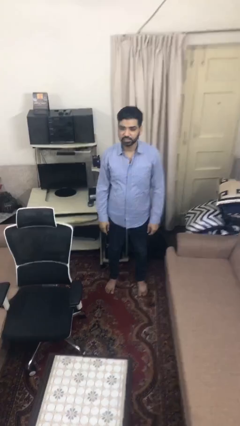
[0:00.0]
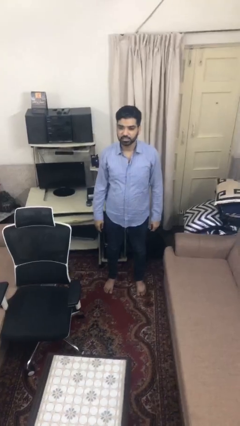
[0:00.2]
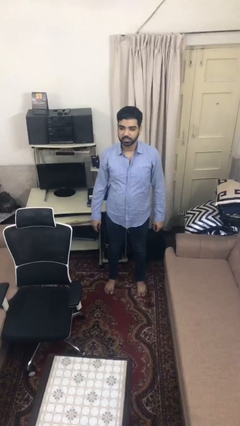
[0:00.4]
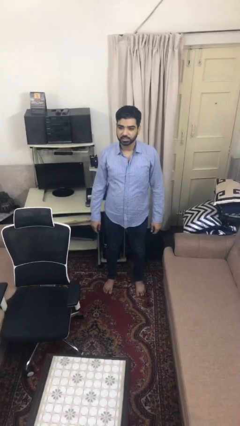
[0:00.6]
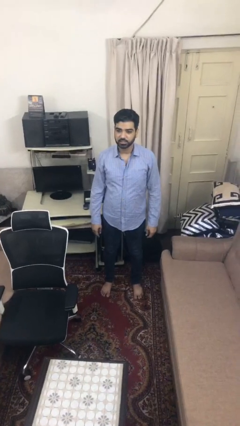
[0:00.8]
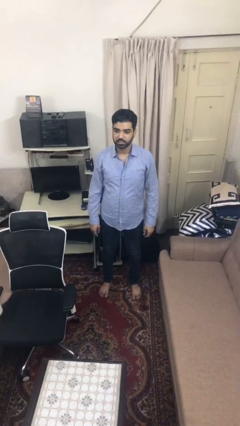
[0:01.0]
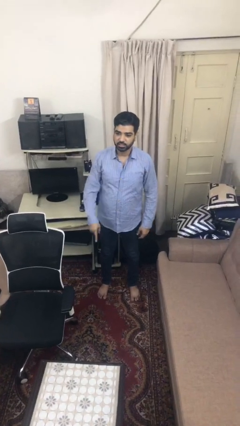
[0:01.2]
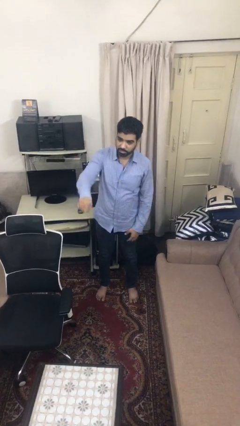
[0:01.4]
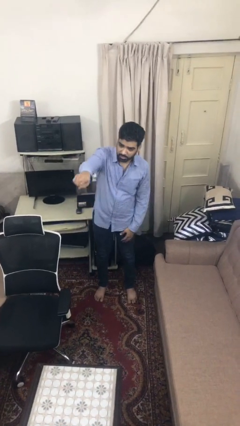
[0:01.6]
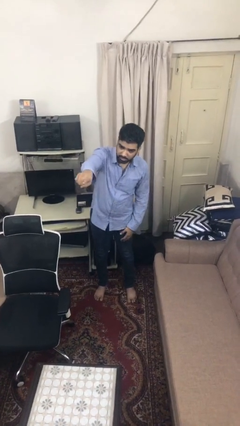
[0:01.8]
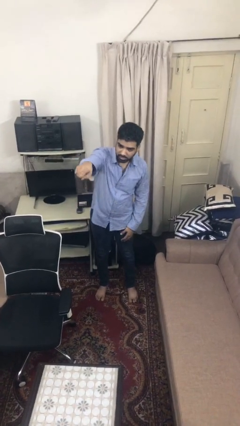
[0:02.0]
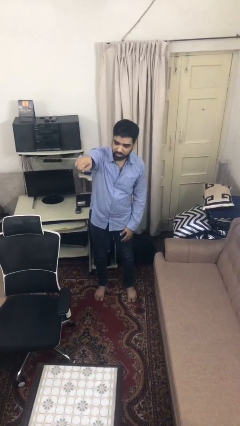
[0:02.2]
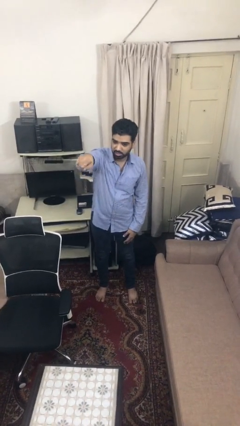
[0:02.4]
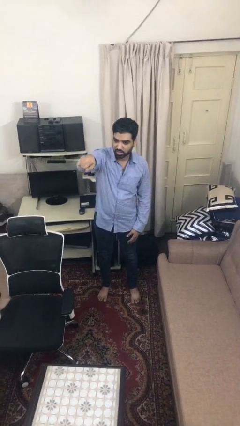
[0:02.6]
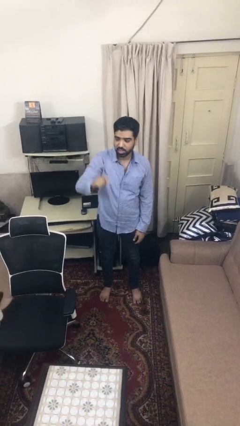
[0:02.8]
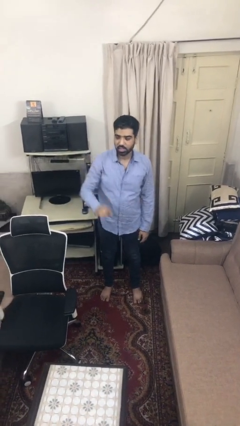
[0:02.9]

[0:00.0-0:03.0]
person points at person

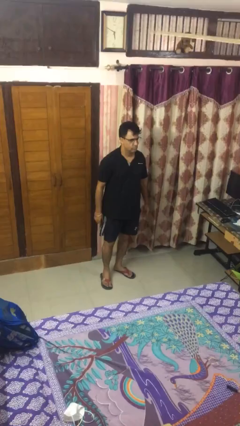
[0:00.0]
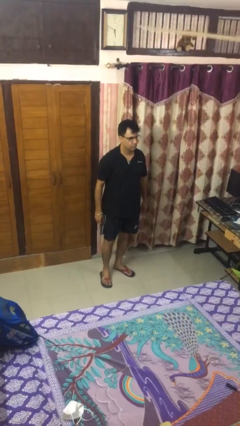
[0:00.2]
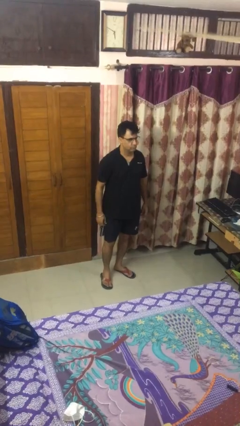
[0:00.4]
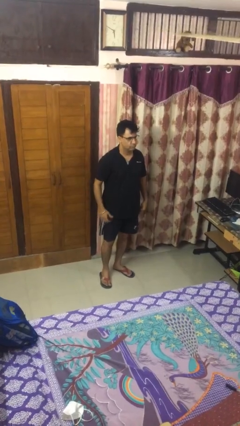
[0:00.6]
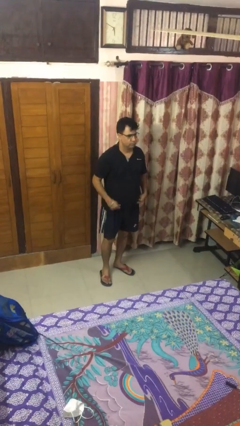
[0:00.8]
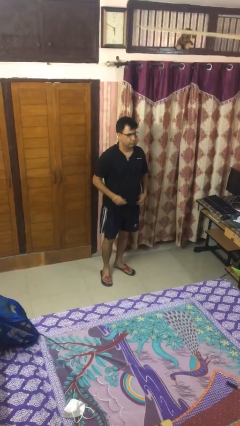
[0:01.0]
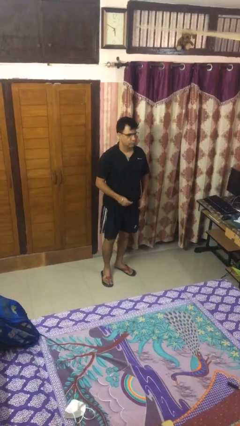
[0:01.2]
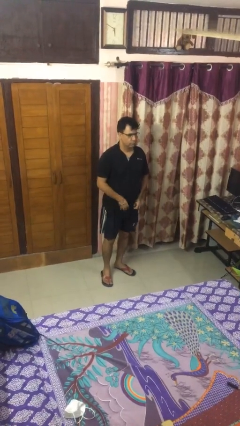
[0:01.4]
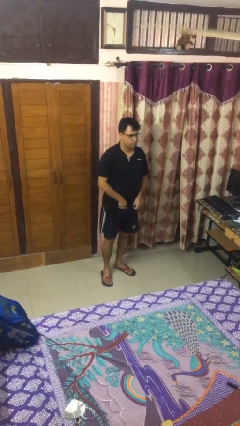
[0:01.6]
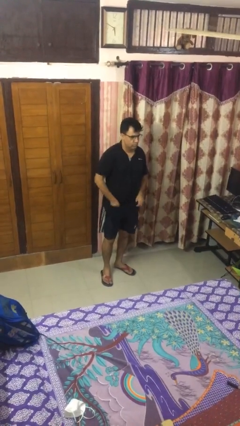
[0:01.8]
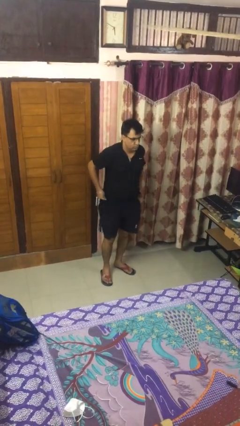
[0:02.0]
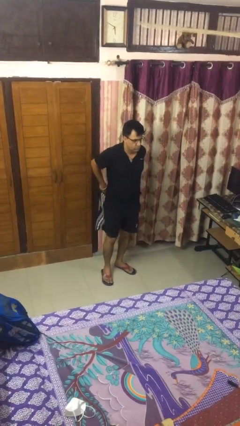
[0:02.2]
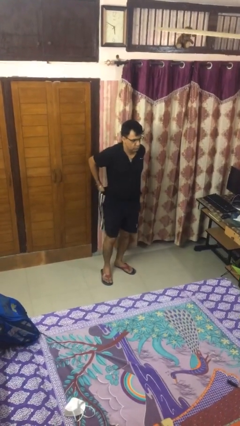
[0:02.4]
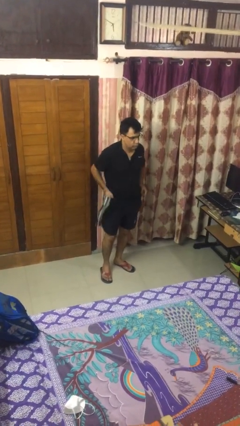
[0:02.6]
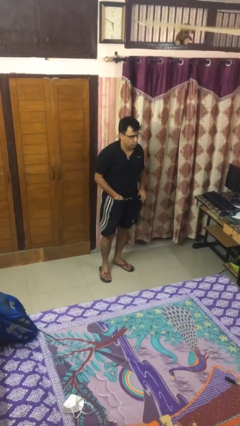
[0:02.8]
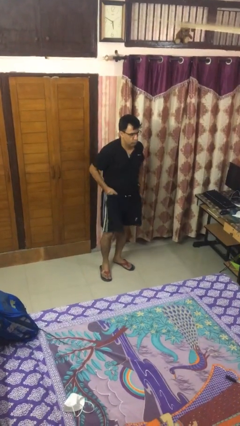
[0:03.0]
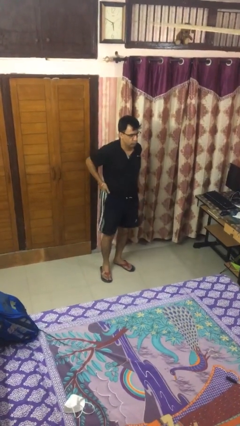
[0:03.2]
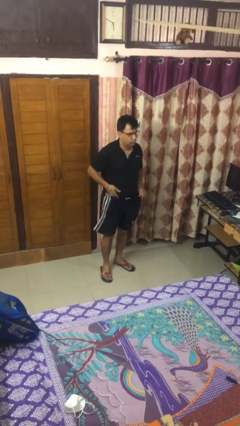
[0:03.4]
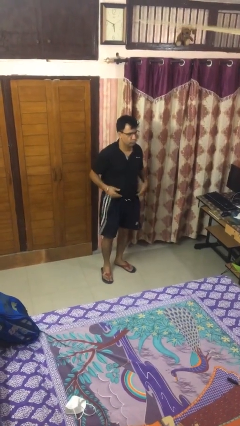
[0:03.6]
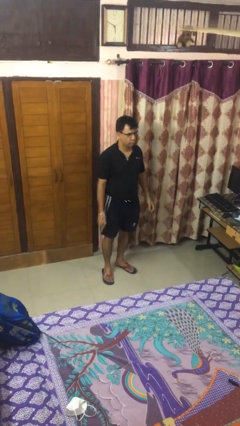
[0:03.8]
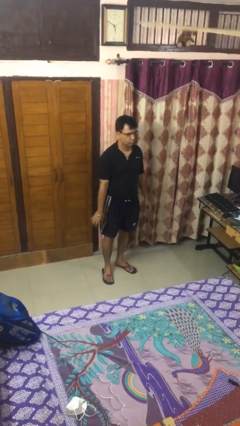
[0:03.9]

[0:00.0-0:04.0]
person tucks in shirt

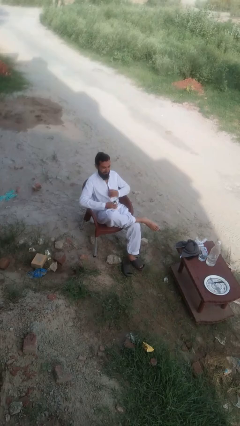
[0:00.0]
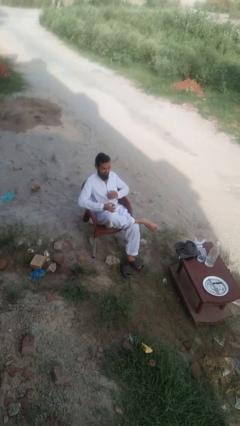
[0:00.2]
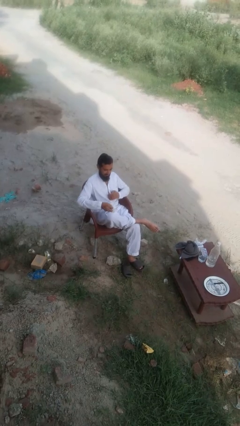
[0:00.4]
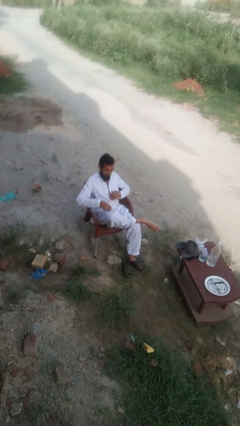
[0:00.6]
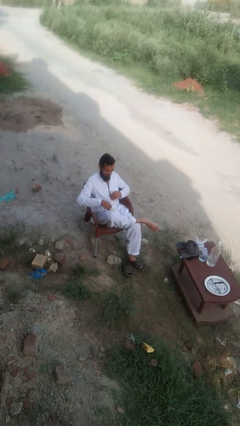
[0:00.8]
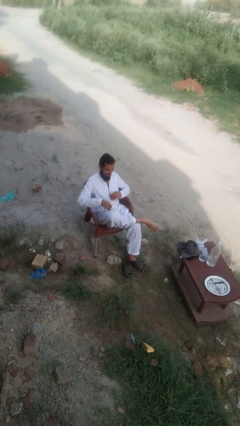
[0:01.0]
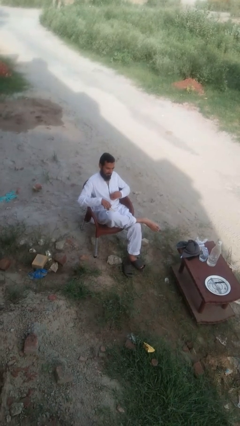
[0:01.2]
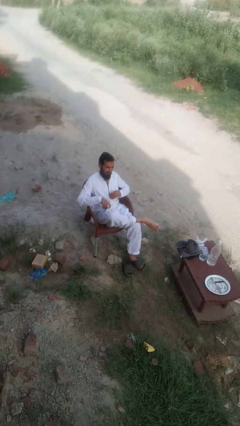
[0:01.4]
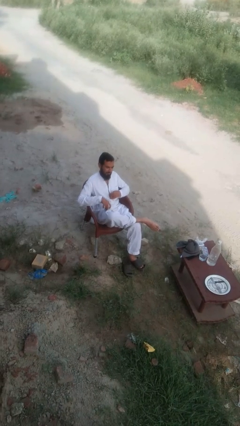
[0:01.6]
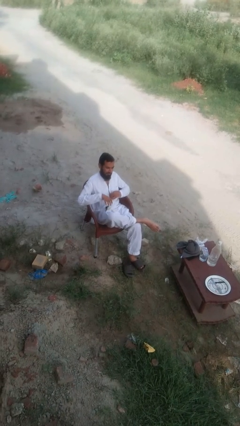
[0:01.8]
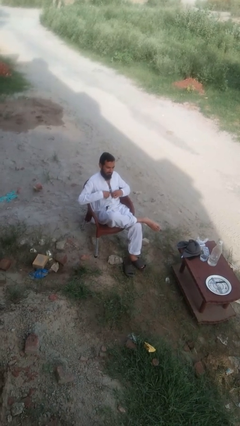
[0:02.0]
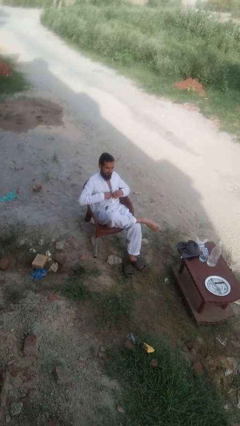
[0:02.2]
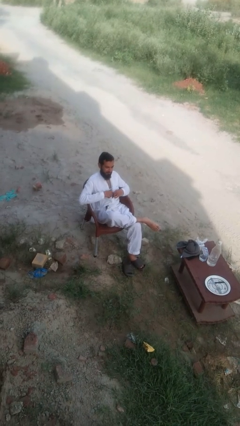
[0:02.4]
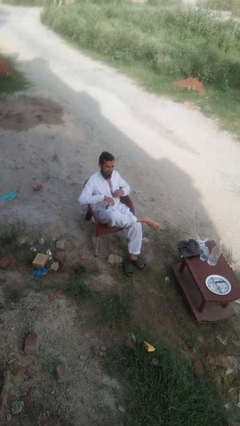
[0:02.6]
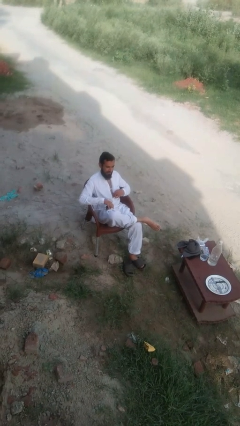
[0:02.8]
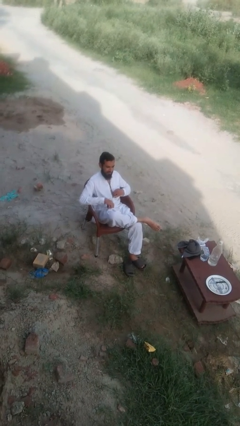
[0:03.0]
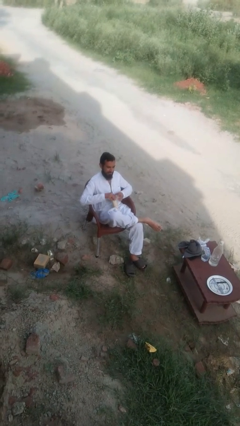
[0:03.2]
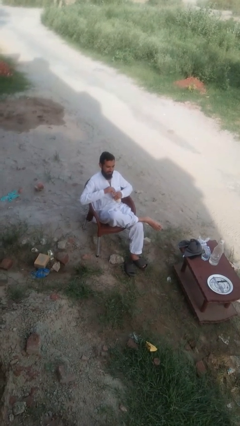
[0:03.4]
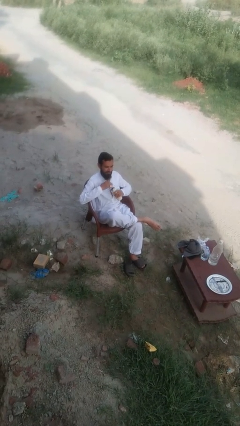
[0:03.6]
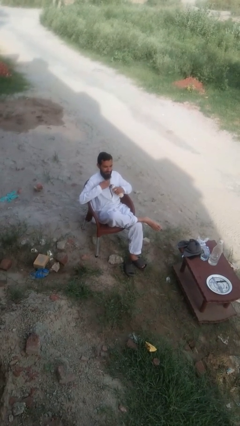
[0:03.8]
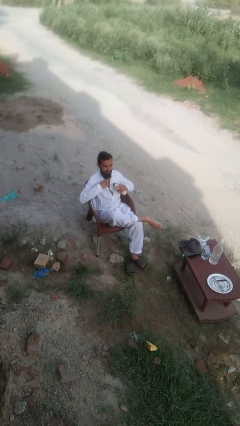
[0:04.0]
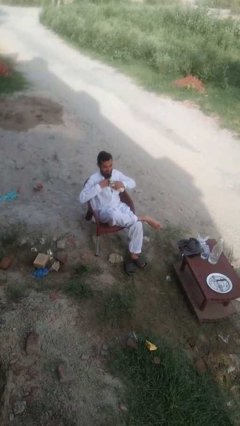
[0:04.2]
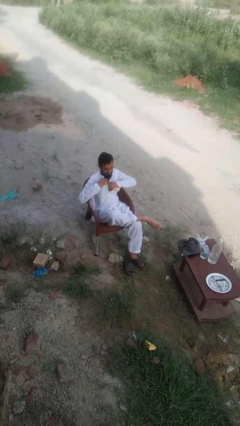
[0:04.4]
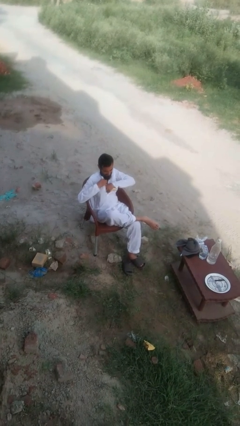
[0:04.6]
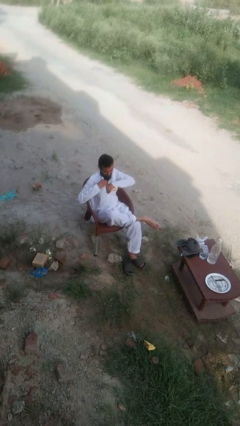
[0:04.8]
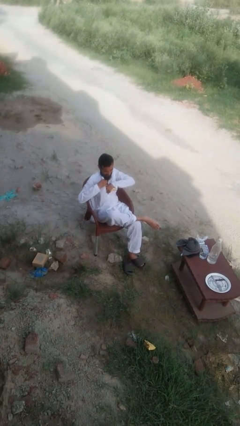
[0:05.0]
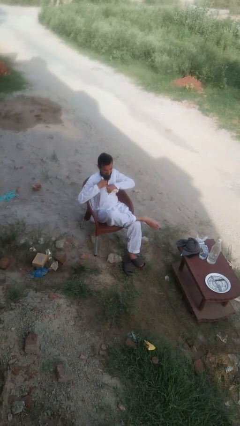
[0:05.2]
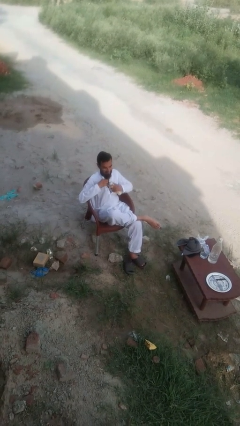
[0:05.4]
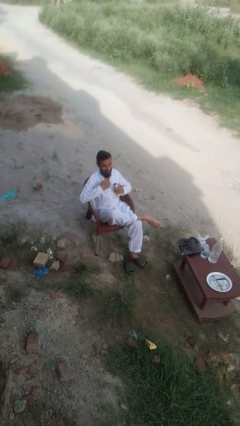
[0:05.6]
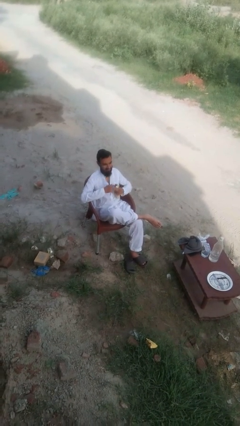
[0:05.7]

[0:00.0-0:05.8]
person applies deodorant

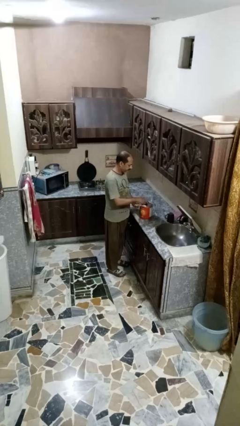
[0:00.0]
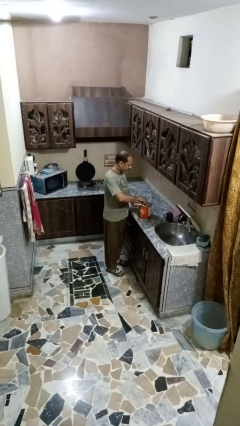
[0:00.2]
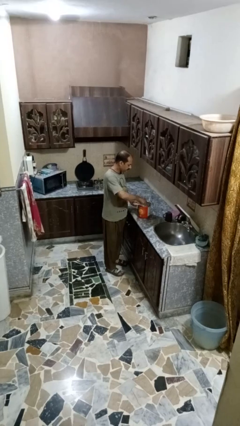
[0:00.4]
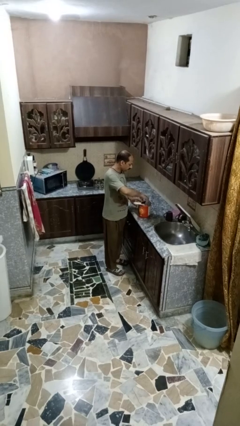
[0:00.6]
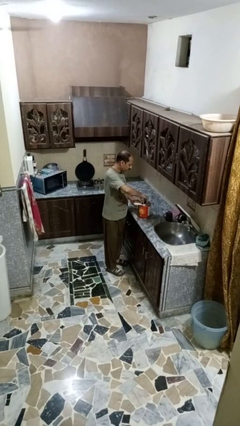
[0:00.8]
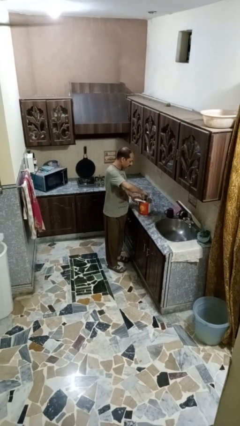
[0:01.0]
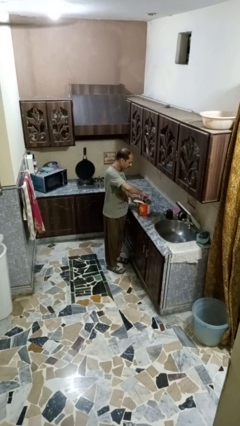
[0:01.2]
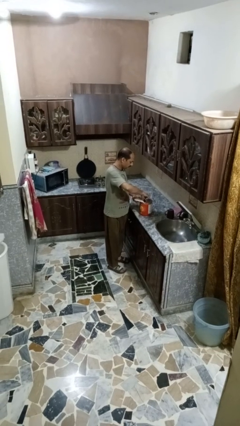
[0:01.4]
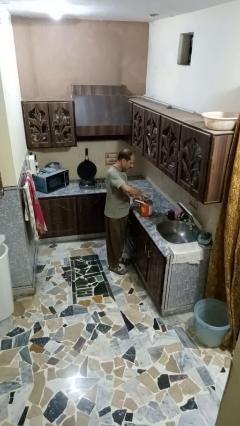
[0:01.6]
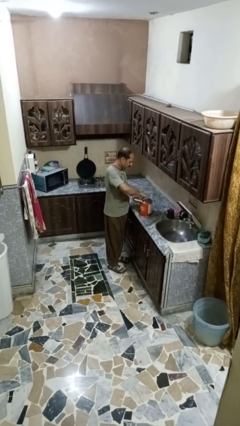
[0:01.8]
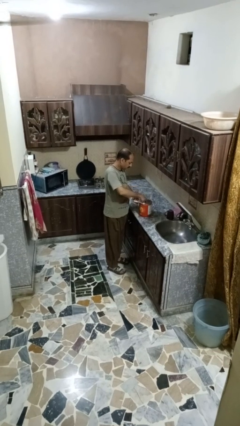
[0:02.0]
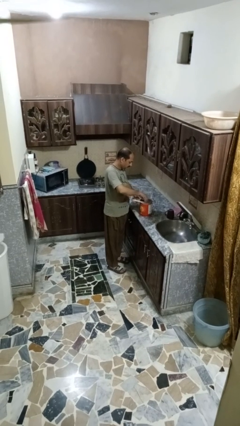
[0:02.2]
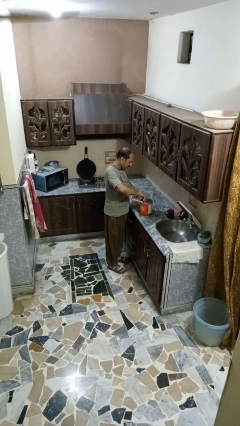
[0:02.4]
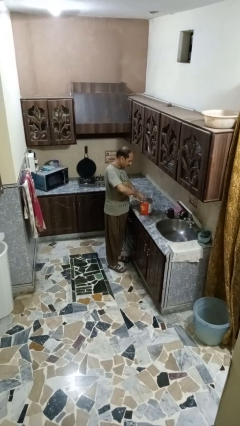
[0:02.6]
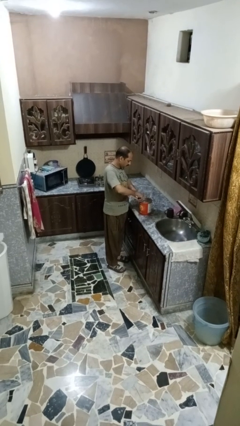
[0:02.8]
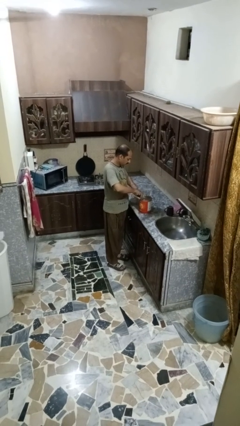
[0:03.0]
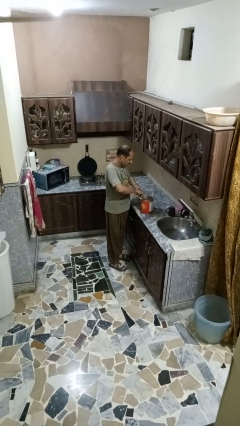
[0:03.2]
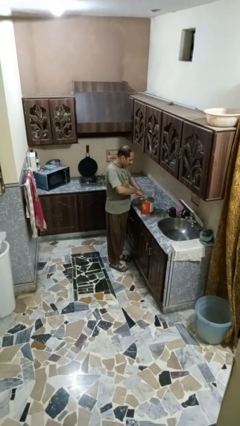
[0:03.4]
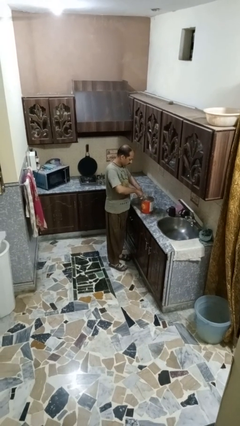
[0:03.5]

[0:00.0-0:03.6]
person opens can with can opener

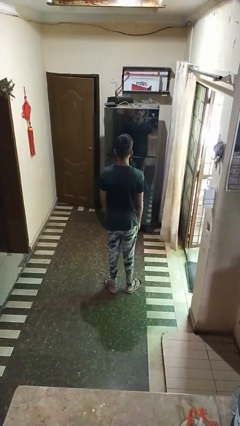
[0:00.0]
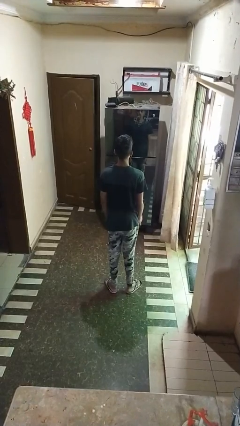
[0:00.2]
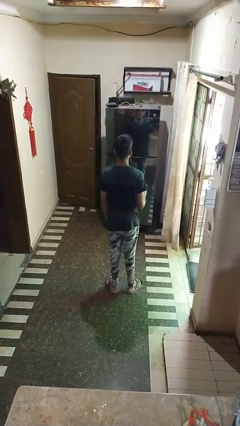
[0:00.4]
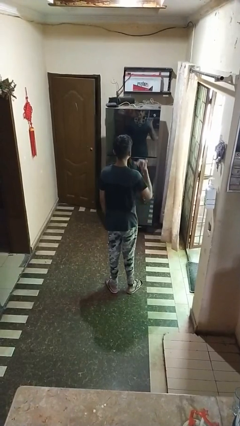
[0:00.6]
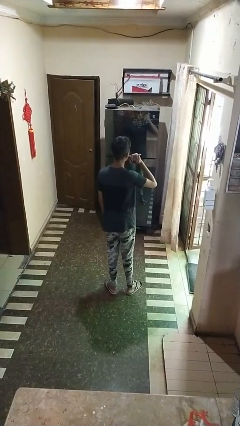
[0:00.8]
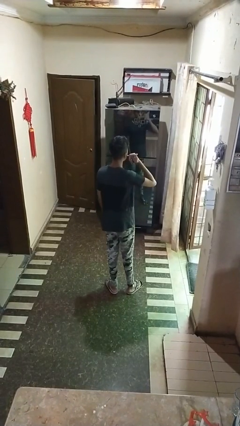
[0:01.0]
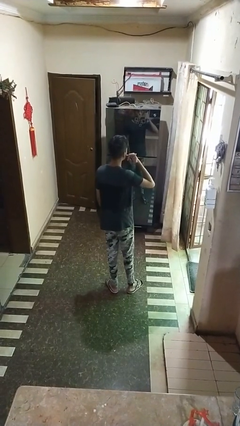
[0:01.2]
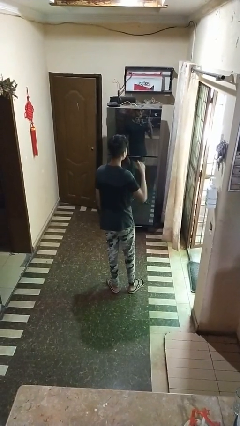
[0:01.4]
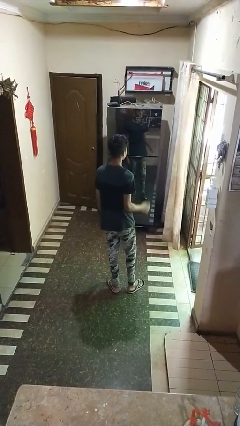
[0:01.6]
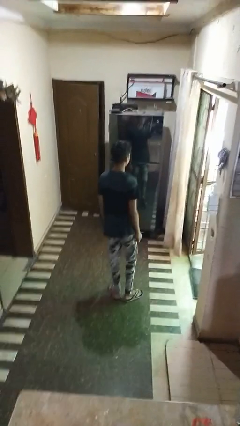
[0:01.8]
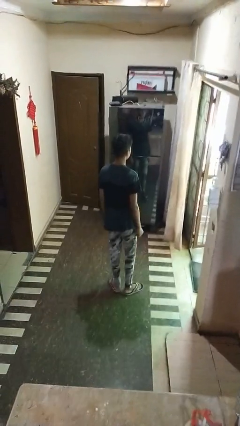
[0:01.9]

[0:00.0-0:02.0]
person gestures call me
